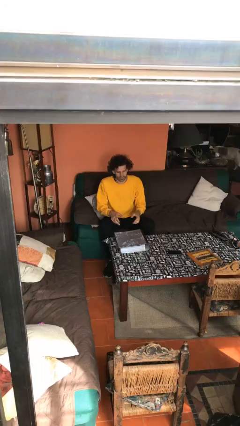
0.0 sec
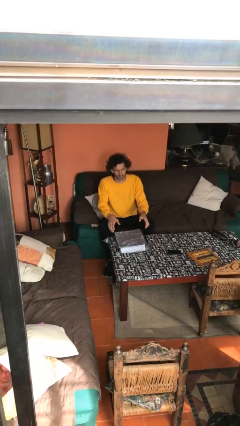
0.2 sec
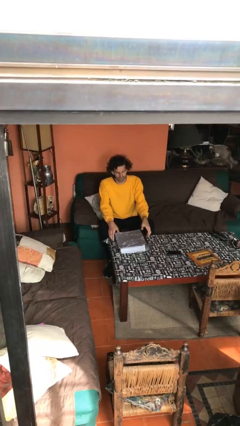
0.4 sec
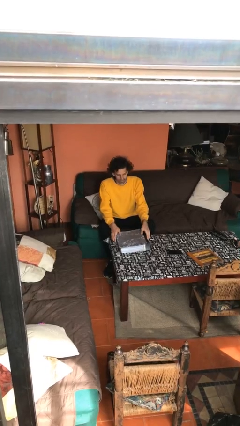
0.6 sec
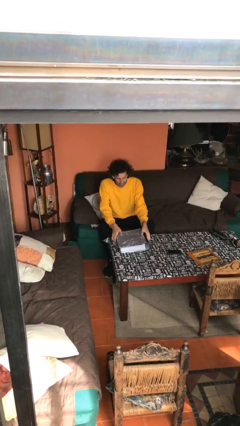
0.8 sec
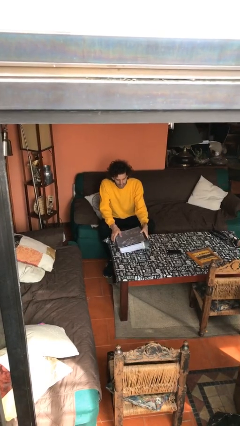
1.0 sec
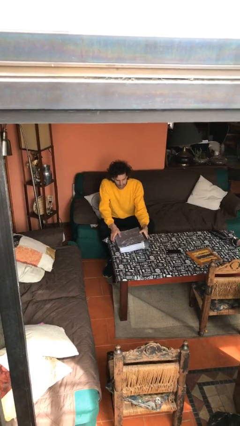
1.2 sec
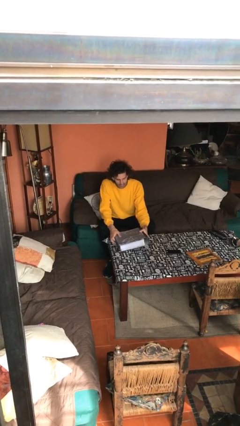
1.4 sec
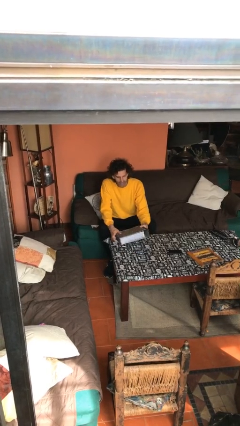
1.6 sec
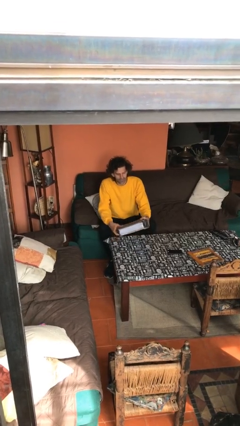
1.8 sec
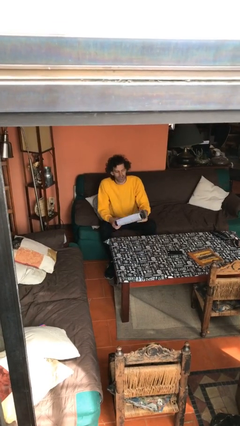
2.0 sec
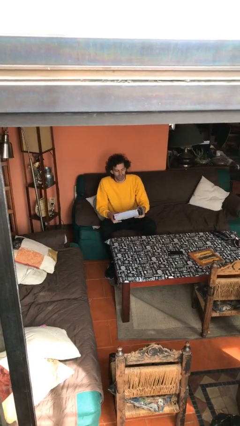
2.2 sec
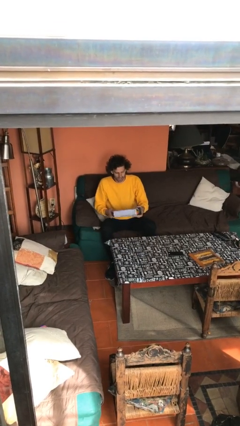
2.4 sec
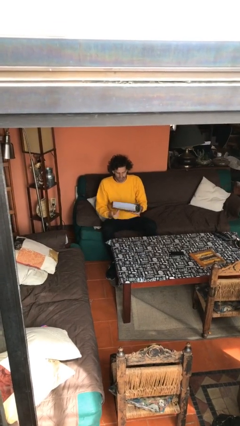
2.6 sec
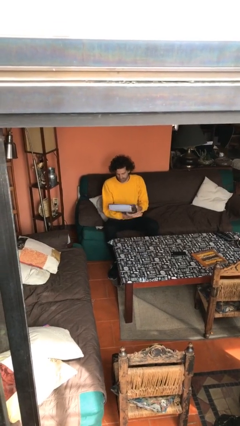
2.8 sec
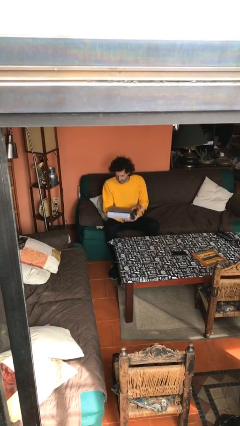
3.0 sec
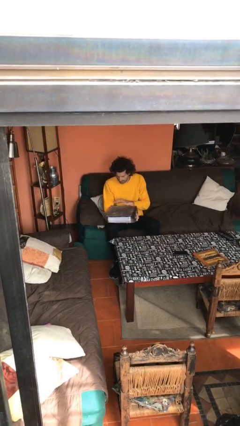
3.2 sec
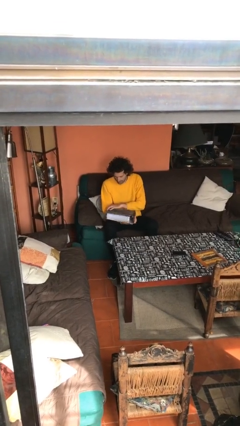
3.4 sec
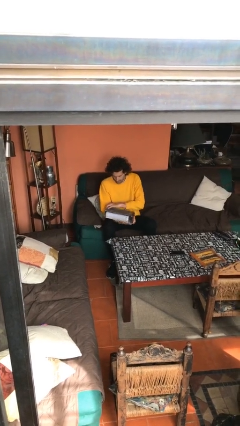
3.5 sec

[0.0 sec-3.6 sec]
person picks up object from table

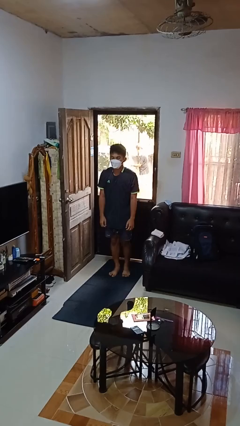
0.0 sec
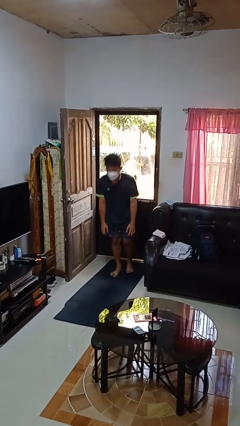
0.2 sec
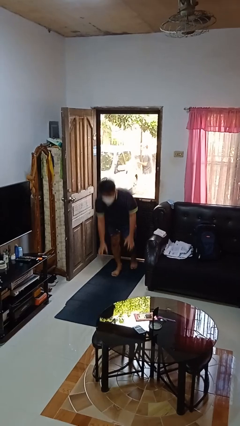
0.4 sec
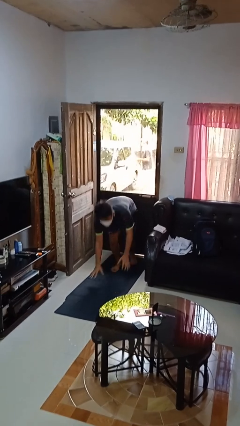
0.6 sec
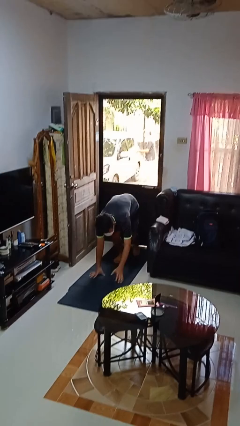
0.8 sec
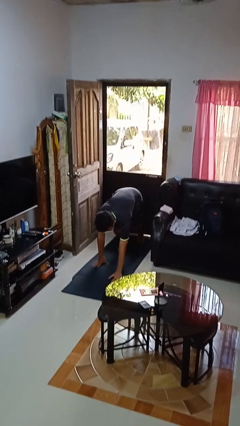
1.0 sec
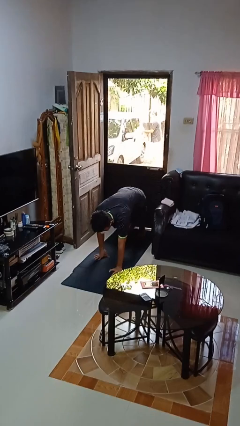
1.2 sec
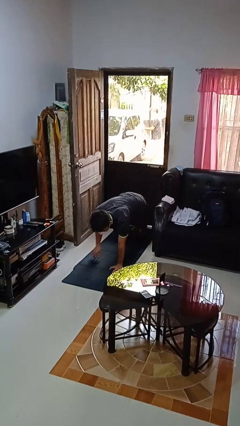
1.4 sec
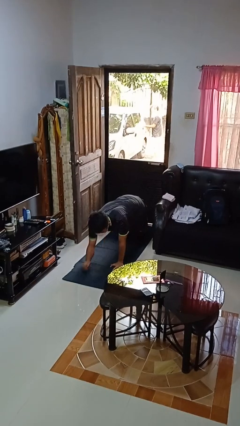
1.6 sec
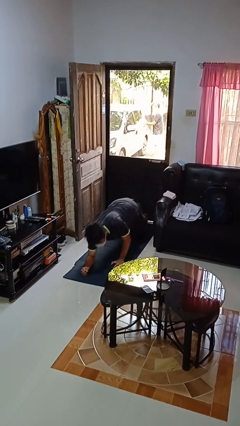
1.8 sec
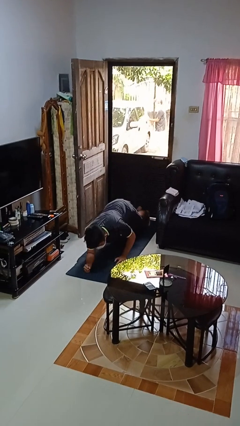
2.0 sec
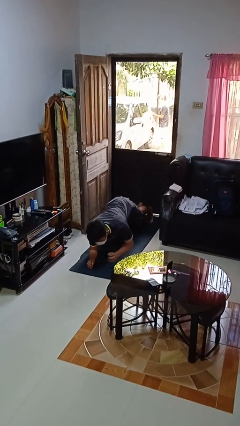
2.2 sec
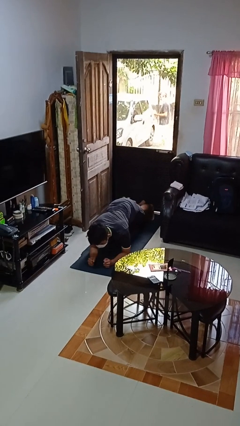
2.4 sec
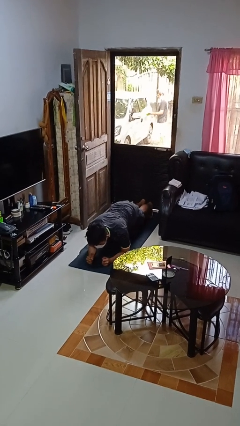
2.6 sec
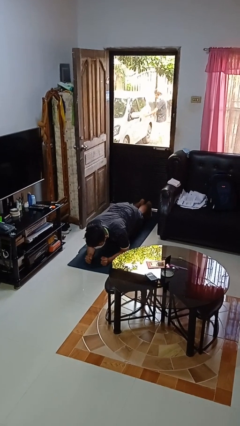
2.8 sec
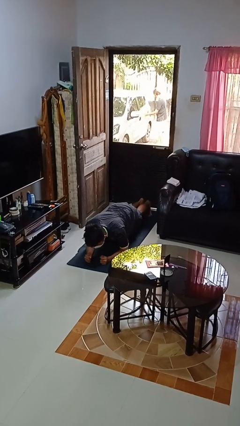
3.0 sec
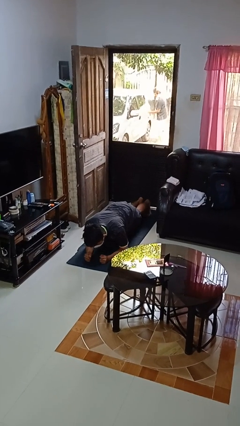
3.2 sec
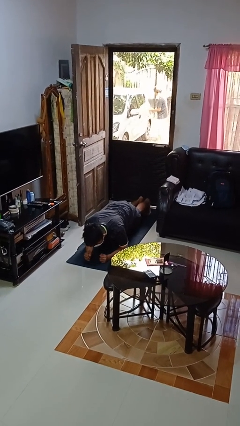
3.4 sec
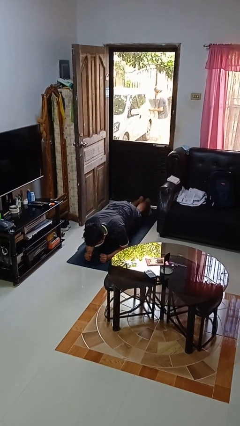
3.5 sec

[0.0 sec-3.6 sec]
person exercises with plank

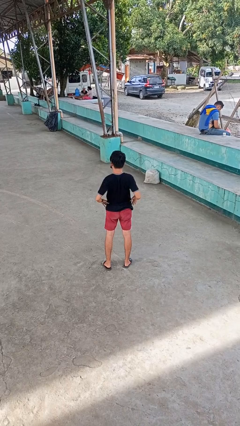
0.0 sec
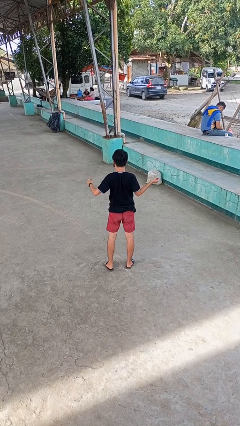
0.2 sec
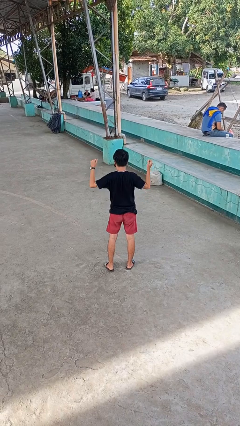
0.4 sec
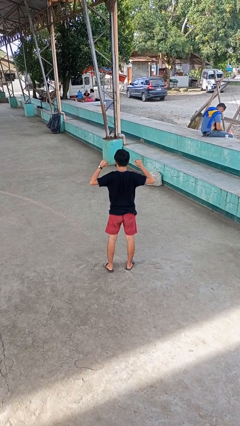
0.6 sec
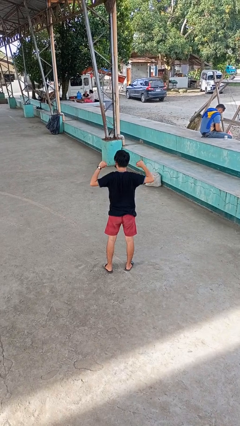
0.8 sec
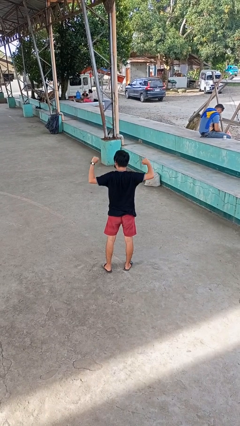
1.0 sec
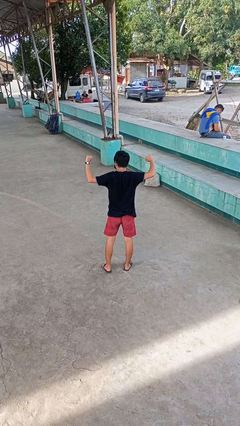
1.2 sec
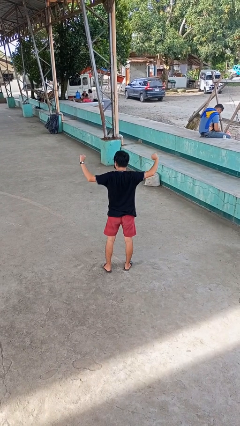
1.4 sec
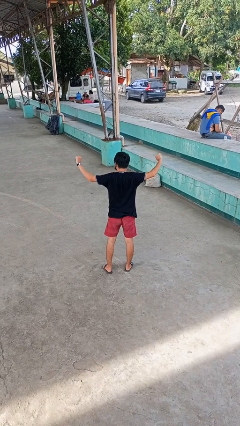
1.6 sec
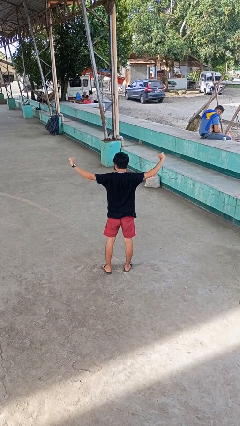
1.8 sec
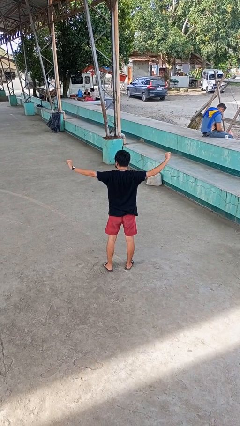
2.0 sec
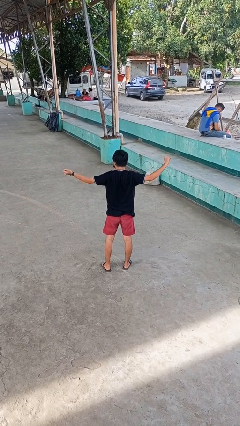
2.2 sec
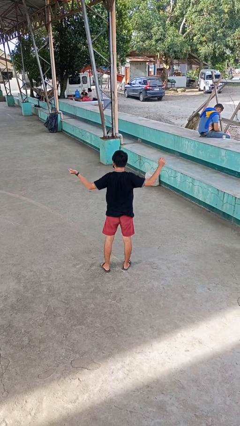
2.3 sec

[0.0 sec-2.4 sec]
person stretches arms to side

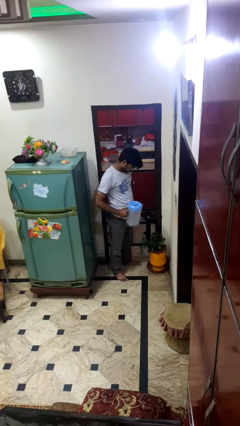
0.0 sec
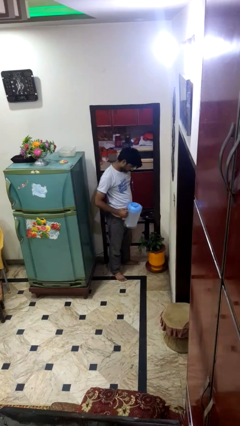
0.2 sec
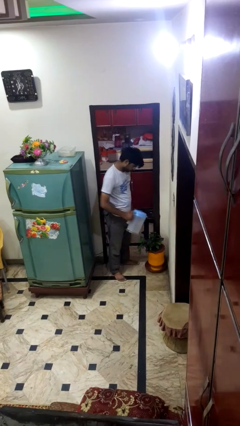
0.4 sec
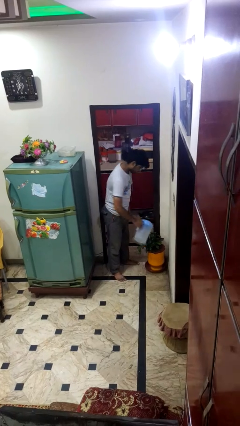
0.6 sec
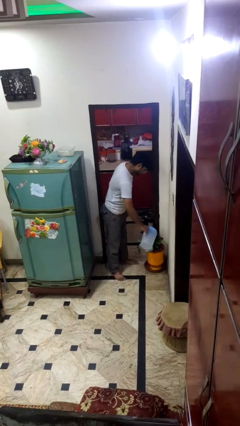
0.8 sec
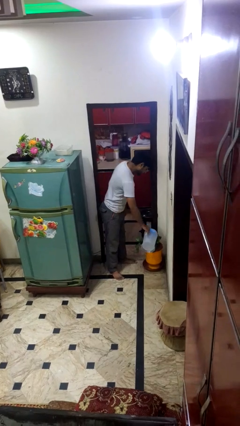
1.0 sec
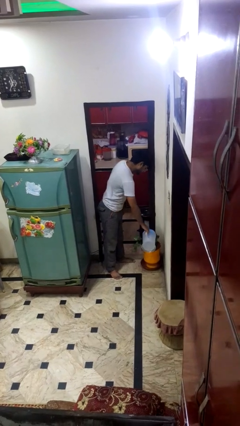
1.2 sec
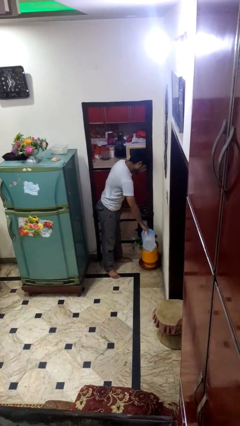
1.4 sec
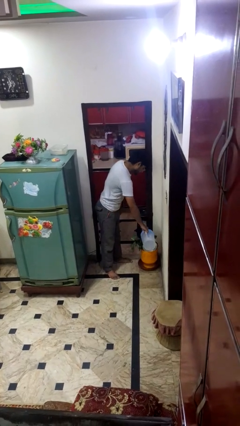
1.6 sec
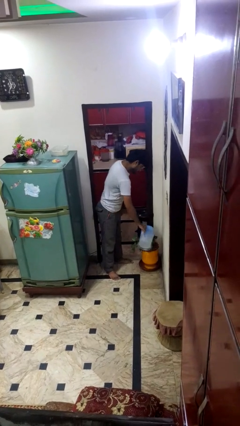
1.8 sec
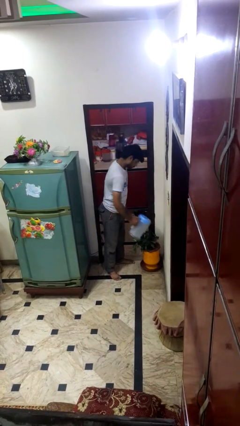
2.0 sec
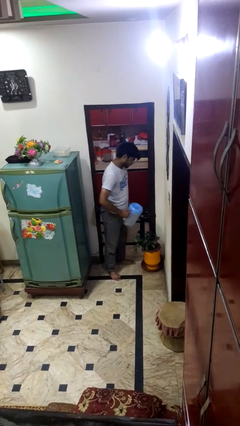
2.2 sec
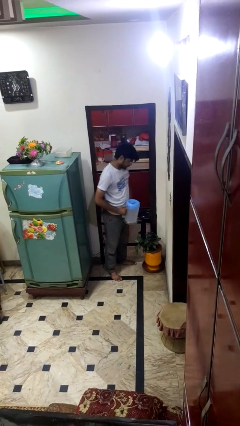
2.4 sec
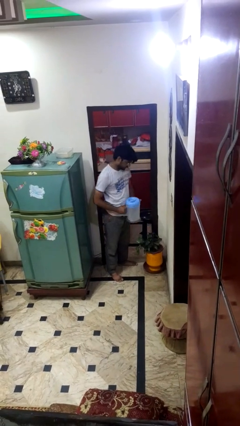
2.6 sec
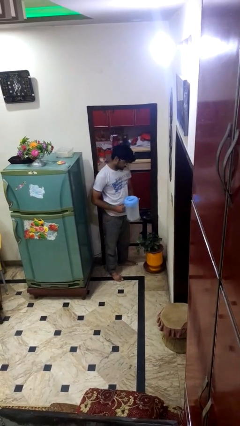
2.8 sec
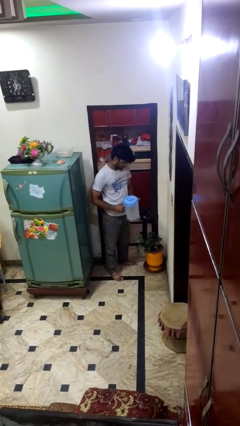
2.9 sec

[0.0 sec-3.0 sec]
person waters houseplant

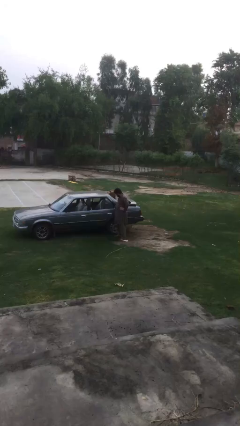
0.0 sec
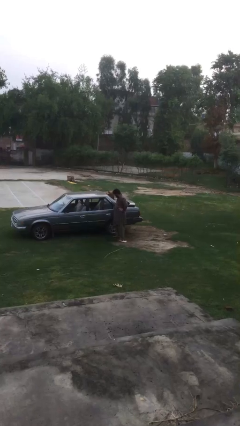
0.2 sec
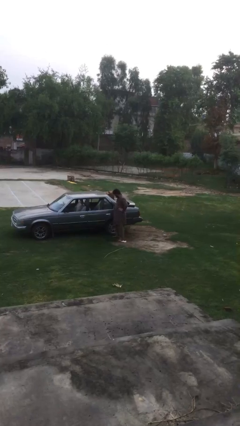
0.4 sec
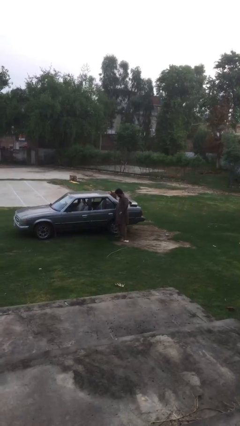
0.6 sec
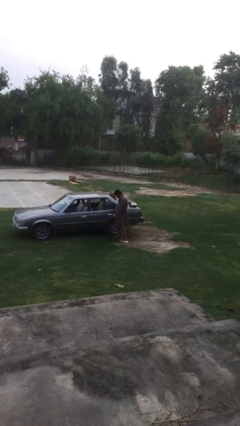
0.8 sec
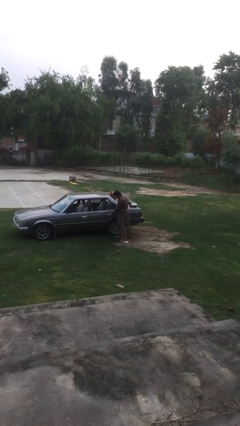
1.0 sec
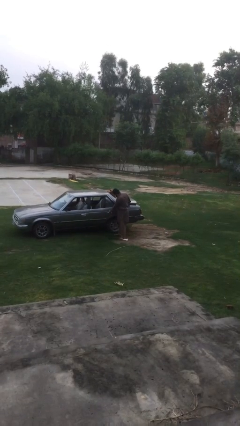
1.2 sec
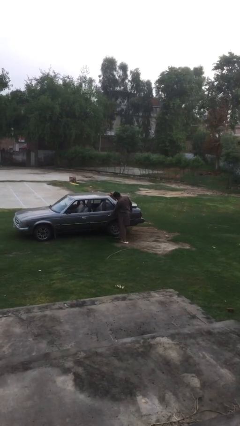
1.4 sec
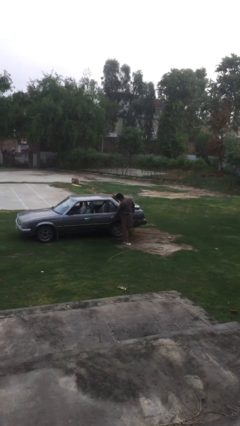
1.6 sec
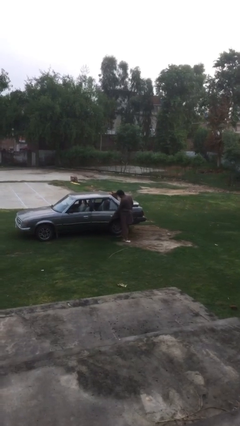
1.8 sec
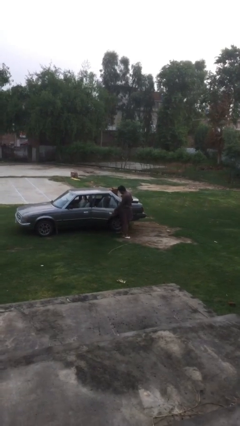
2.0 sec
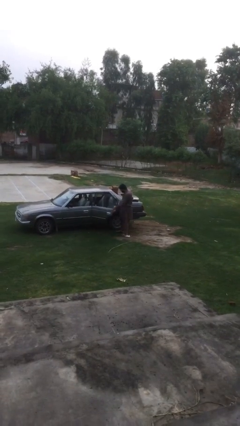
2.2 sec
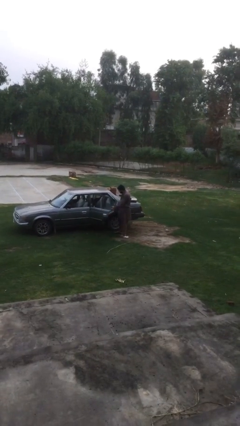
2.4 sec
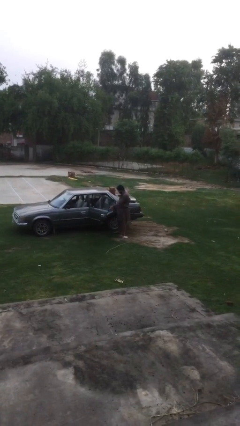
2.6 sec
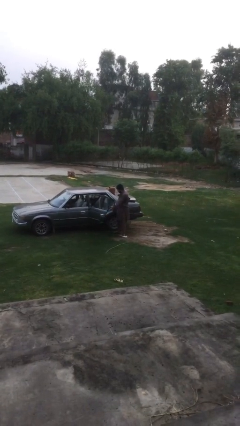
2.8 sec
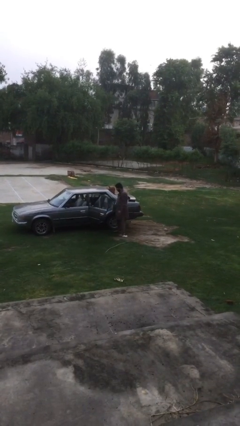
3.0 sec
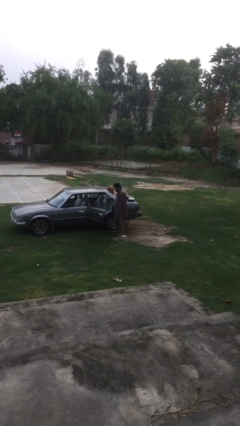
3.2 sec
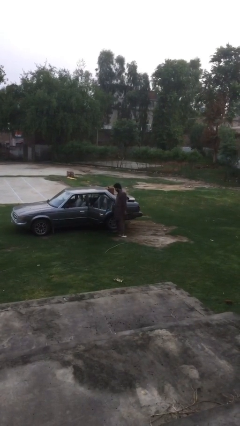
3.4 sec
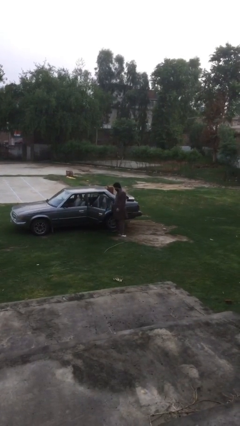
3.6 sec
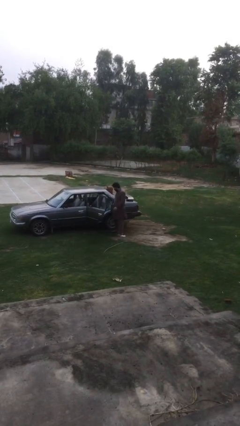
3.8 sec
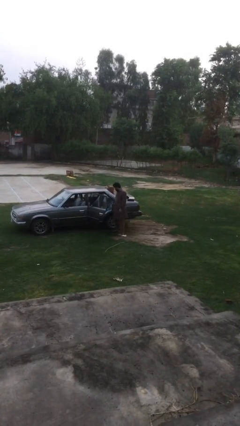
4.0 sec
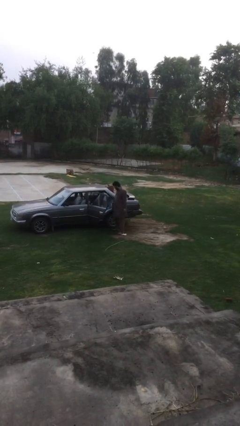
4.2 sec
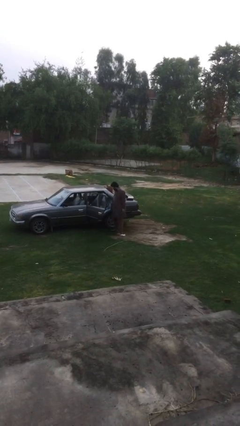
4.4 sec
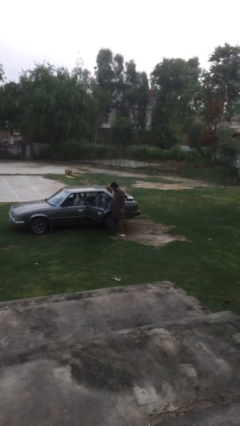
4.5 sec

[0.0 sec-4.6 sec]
person opens car door
